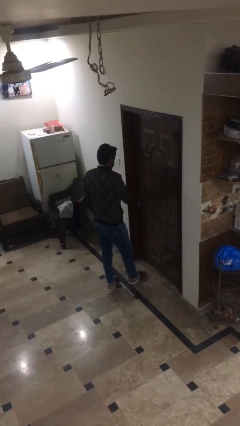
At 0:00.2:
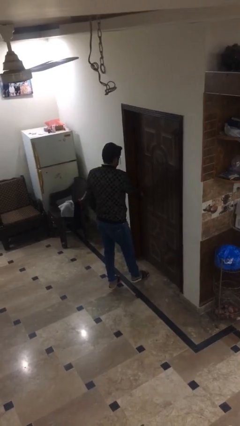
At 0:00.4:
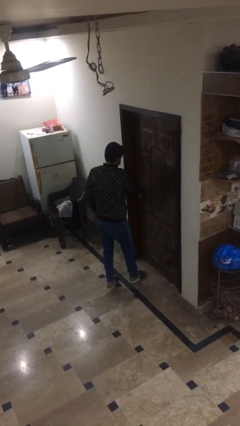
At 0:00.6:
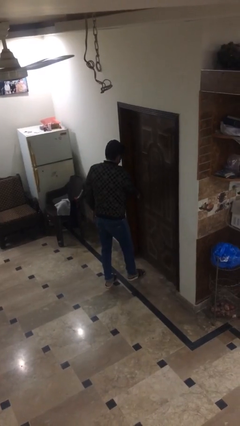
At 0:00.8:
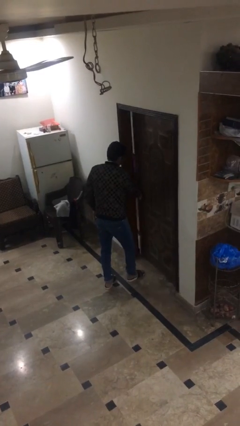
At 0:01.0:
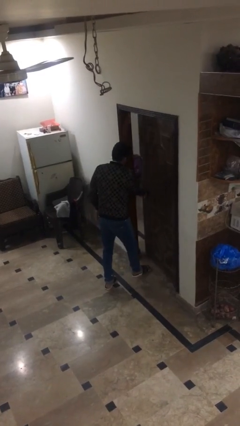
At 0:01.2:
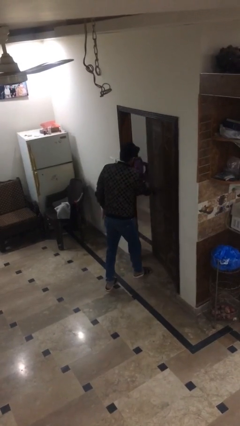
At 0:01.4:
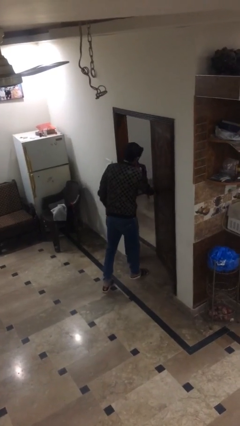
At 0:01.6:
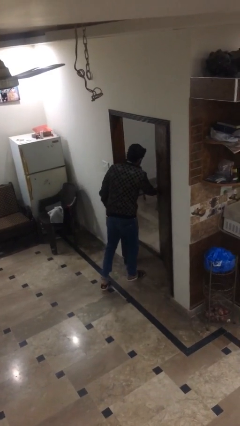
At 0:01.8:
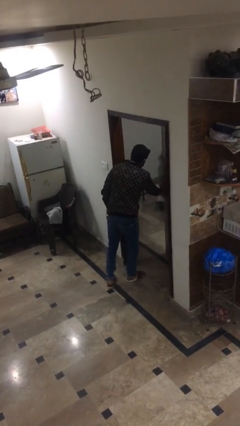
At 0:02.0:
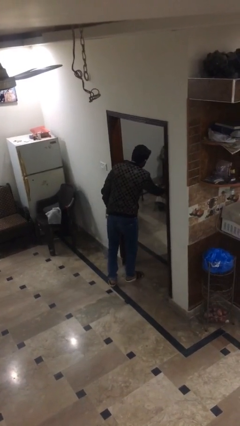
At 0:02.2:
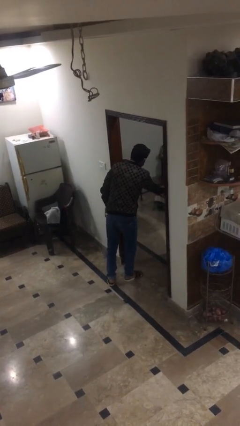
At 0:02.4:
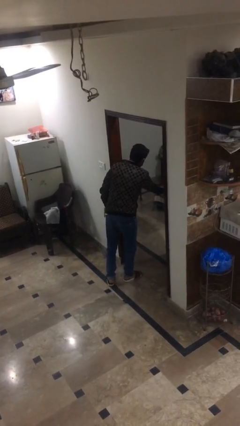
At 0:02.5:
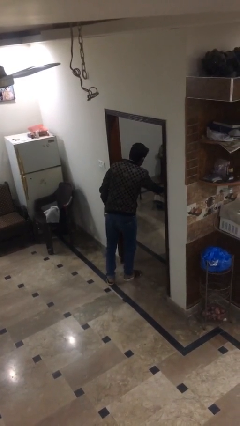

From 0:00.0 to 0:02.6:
person opens facility door

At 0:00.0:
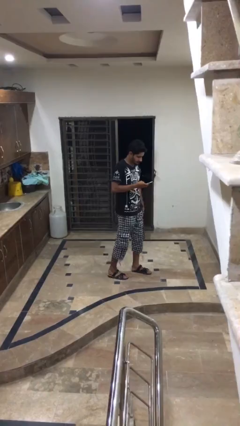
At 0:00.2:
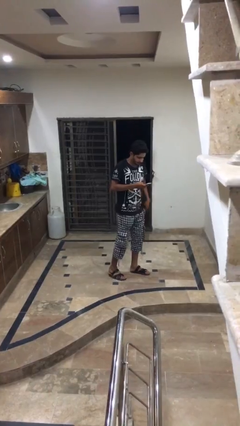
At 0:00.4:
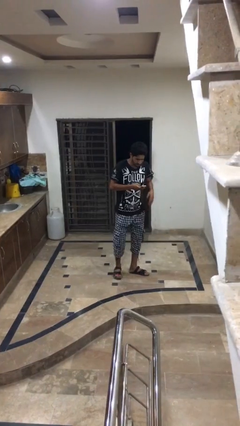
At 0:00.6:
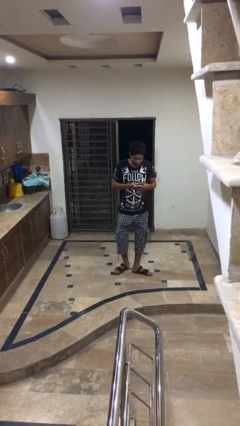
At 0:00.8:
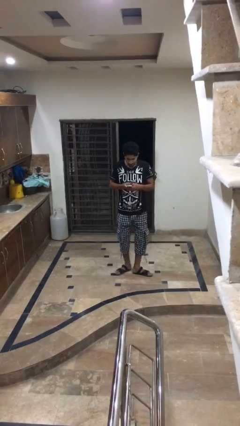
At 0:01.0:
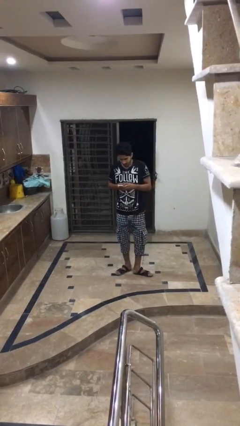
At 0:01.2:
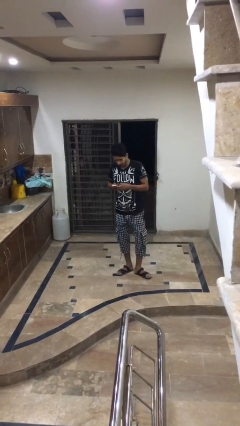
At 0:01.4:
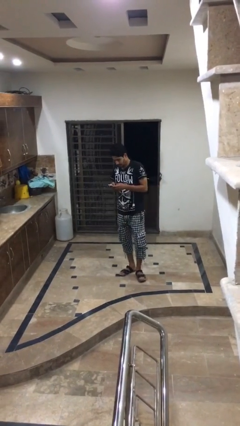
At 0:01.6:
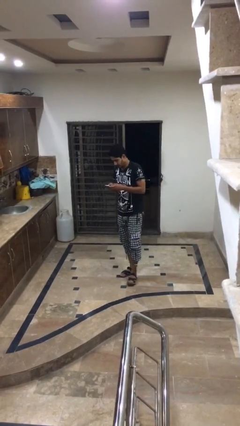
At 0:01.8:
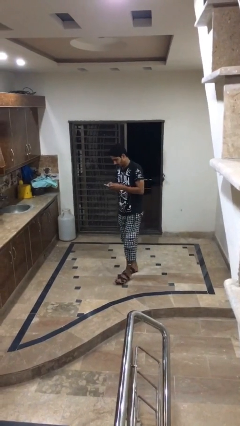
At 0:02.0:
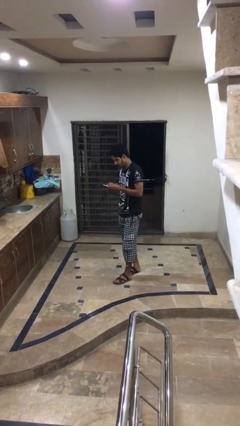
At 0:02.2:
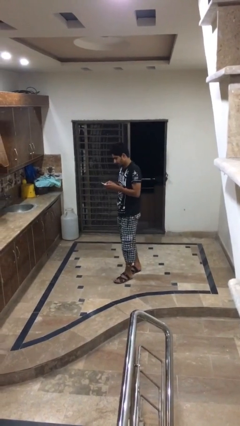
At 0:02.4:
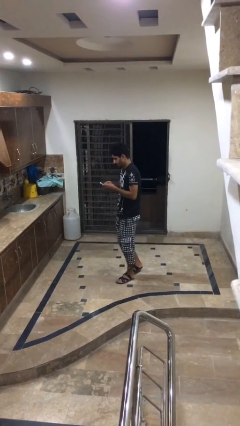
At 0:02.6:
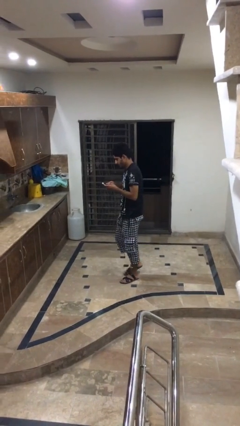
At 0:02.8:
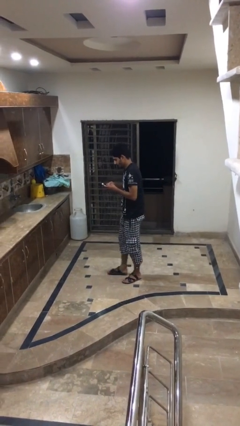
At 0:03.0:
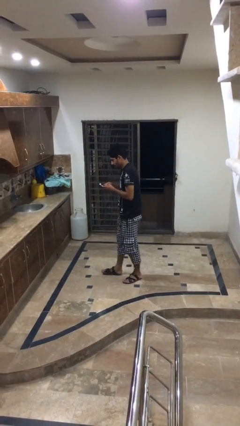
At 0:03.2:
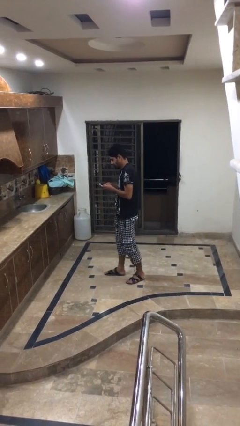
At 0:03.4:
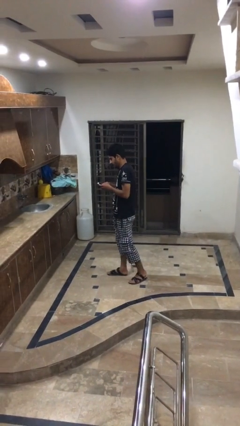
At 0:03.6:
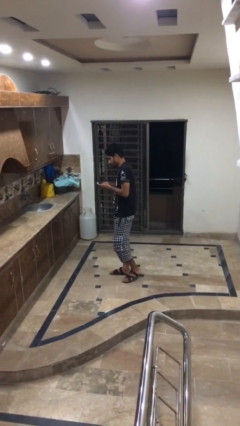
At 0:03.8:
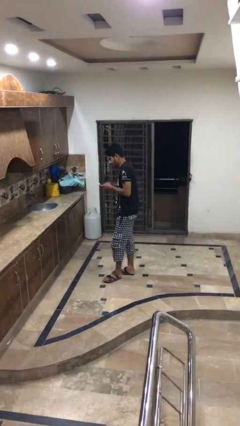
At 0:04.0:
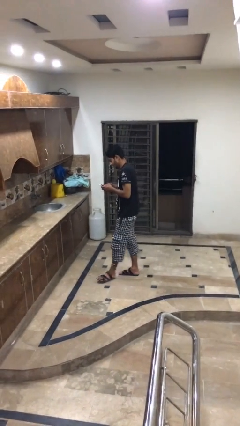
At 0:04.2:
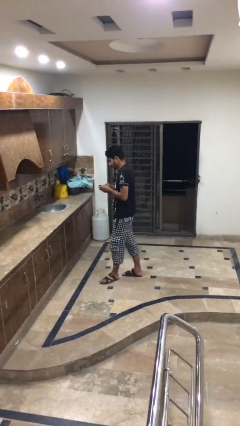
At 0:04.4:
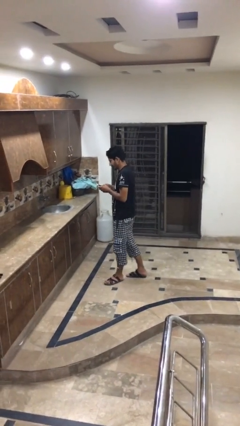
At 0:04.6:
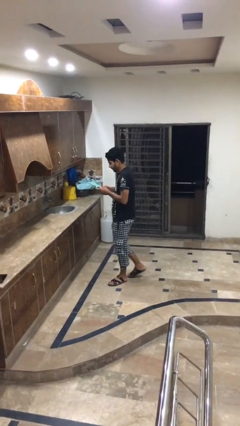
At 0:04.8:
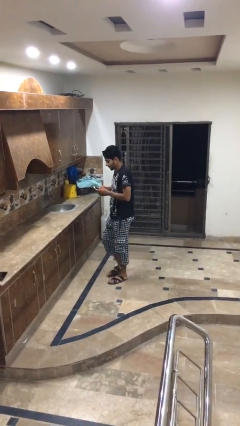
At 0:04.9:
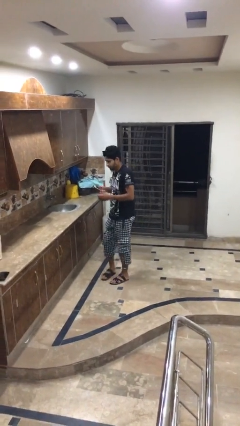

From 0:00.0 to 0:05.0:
person texts on phone

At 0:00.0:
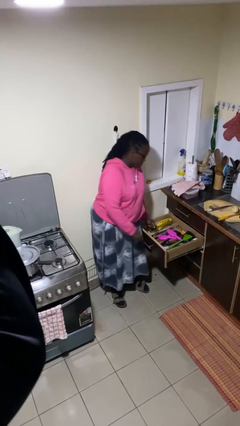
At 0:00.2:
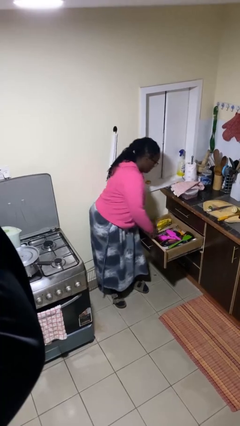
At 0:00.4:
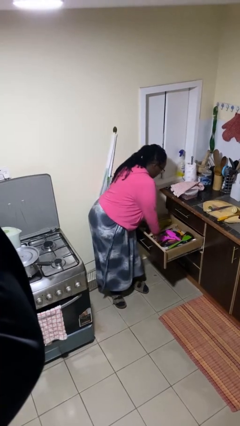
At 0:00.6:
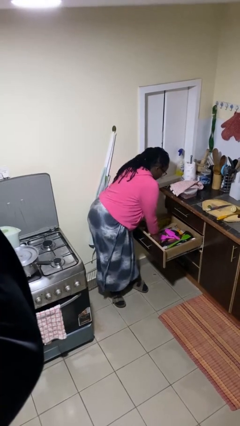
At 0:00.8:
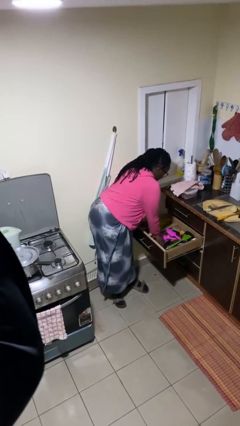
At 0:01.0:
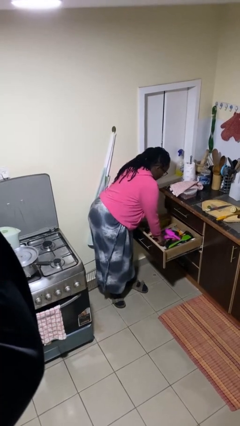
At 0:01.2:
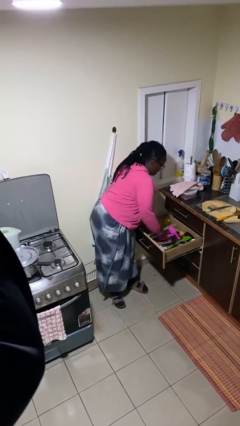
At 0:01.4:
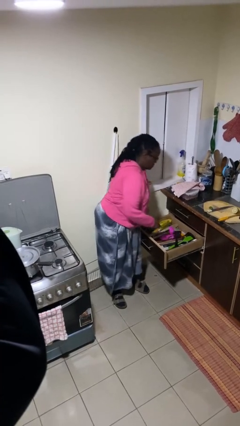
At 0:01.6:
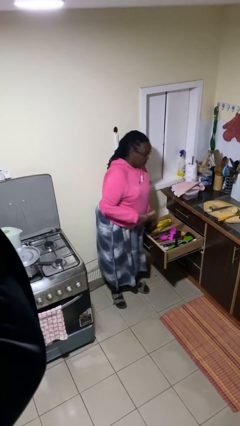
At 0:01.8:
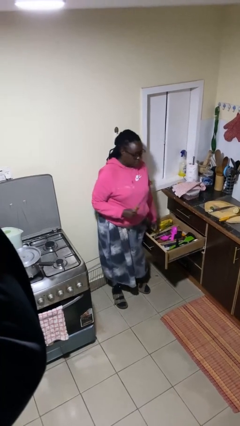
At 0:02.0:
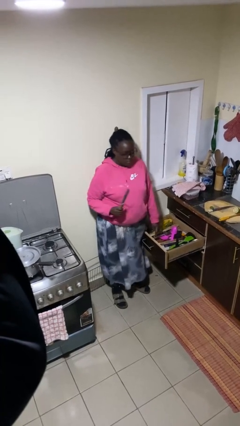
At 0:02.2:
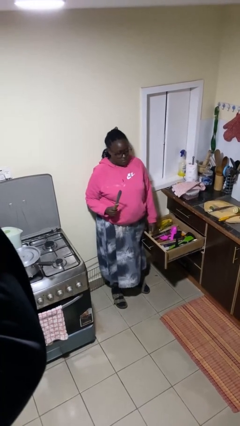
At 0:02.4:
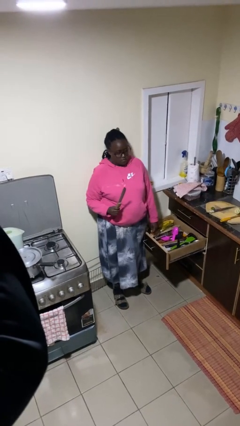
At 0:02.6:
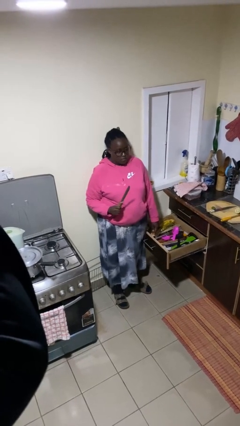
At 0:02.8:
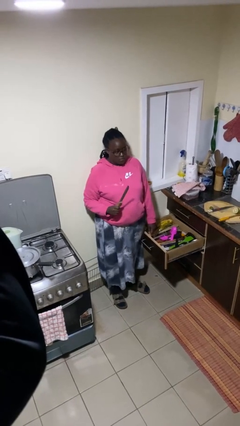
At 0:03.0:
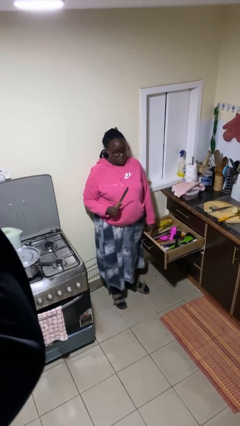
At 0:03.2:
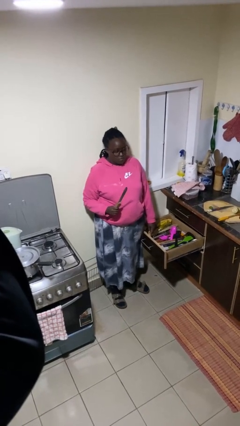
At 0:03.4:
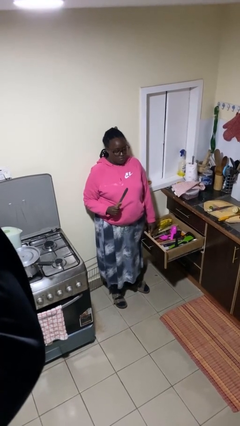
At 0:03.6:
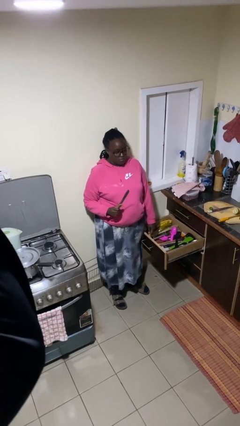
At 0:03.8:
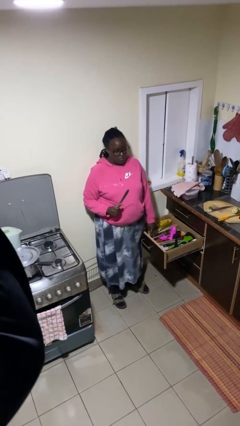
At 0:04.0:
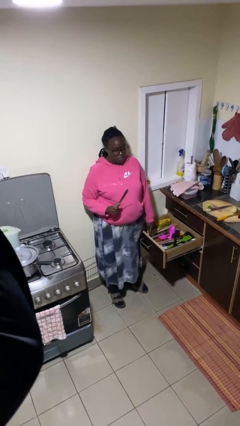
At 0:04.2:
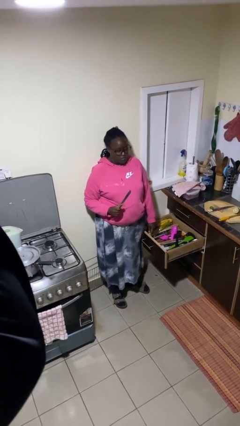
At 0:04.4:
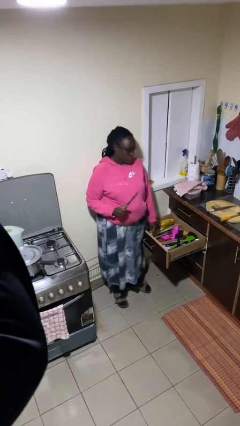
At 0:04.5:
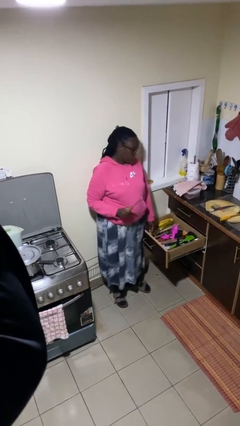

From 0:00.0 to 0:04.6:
person takes object from kitchen drawer

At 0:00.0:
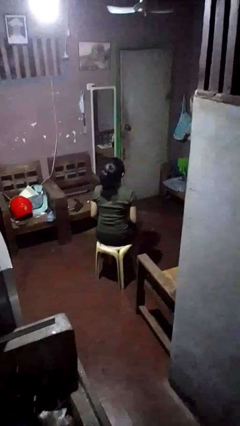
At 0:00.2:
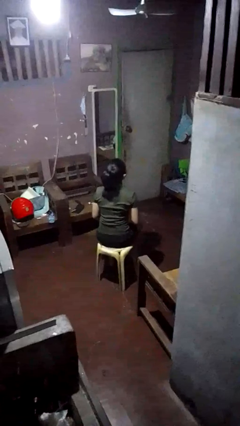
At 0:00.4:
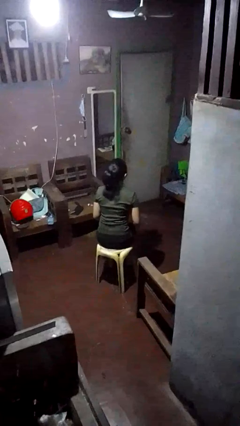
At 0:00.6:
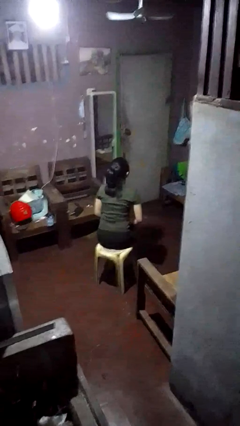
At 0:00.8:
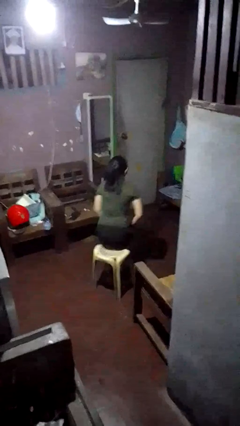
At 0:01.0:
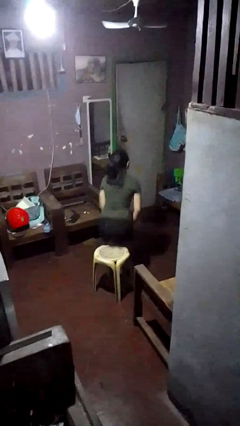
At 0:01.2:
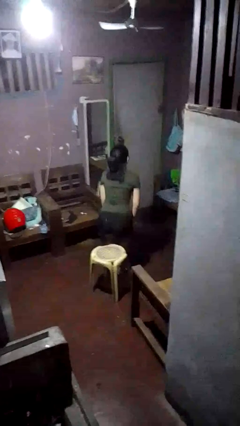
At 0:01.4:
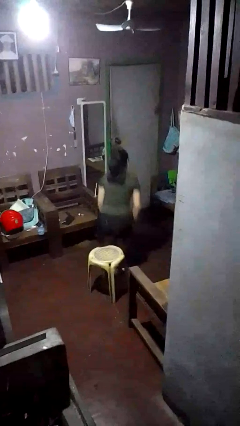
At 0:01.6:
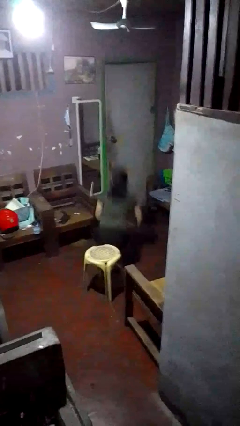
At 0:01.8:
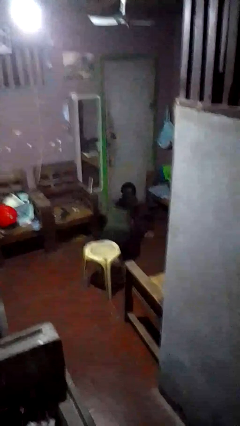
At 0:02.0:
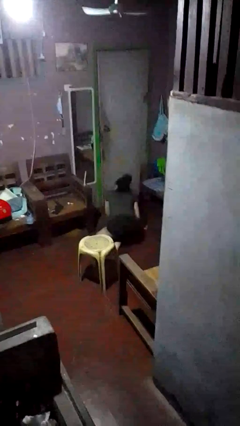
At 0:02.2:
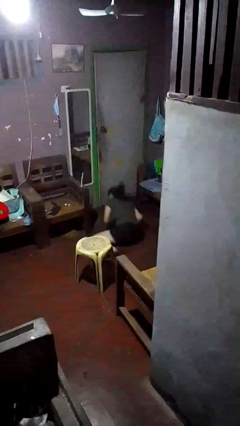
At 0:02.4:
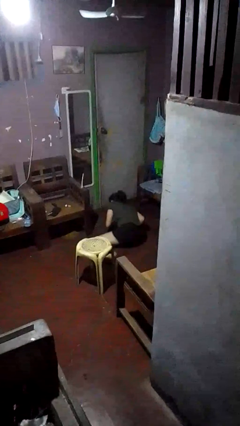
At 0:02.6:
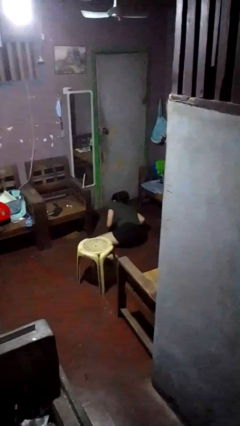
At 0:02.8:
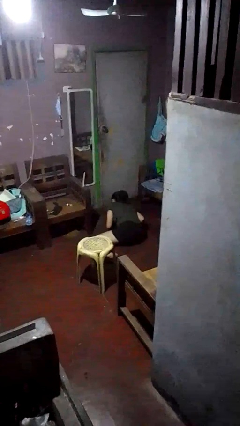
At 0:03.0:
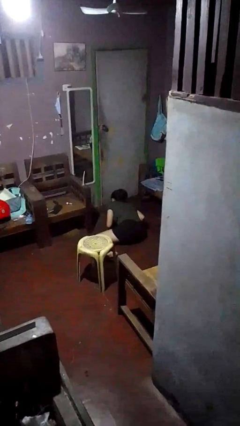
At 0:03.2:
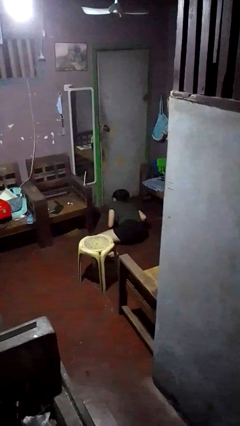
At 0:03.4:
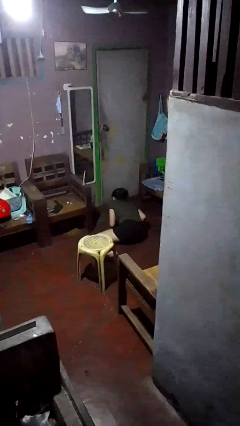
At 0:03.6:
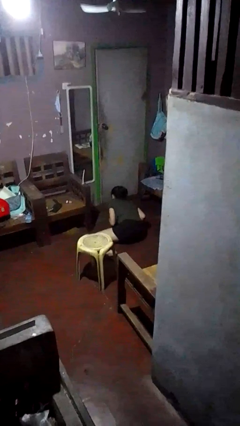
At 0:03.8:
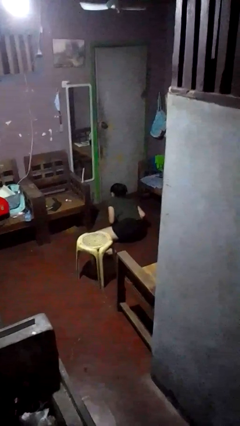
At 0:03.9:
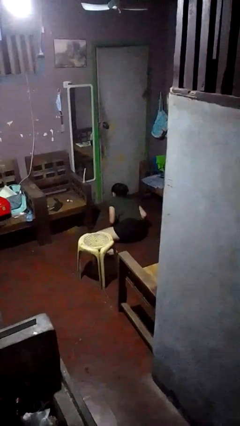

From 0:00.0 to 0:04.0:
person falls from chair

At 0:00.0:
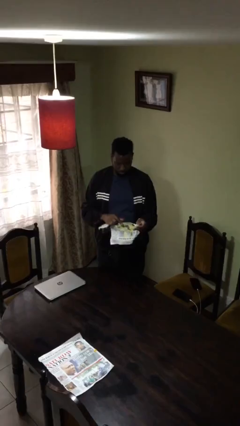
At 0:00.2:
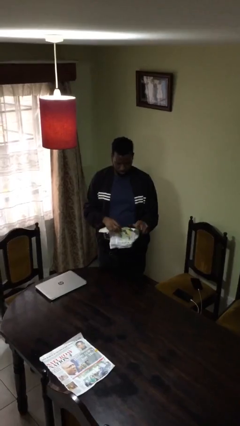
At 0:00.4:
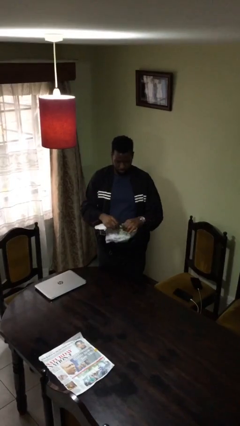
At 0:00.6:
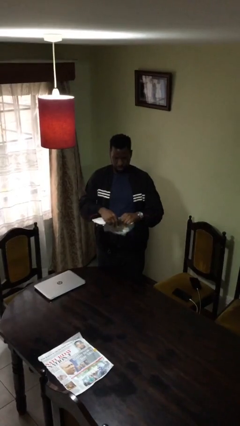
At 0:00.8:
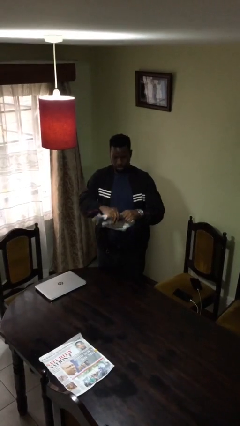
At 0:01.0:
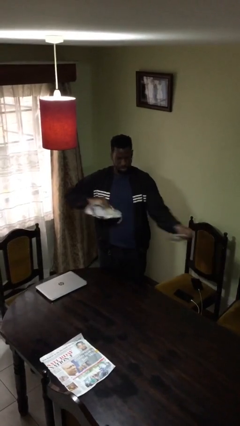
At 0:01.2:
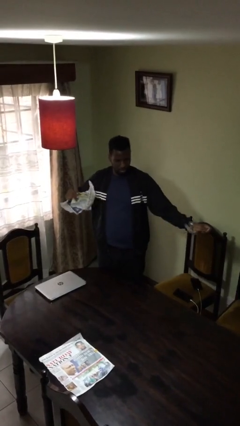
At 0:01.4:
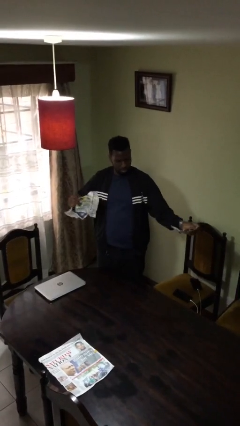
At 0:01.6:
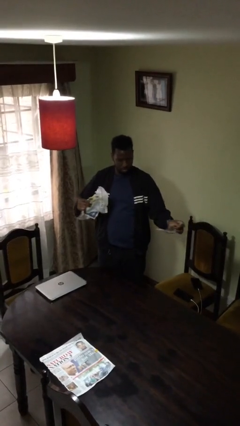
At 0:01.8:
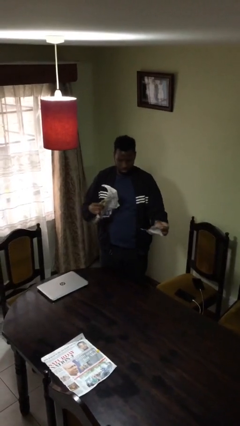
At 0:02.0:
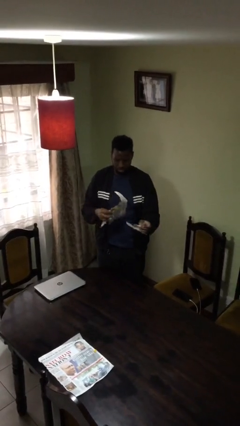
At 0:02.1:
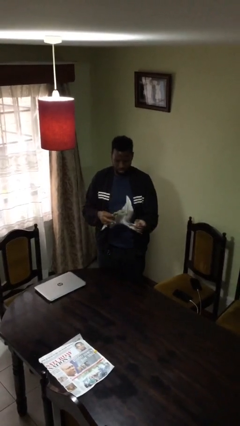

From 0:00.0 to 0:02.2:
person tears paper
